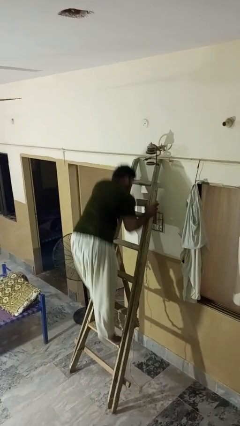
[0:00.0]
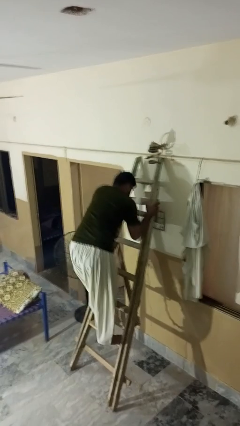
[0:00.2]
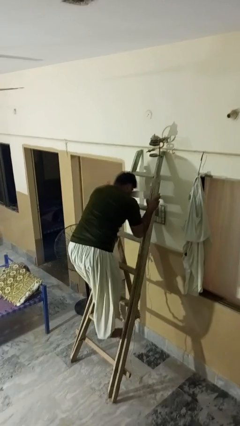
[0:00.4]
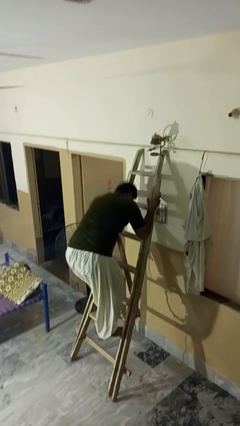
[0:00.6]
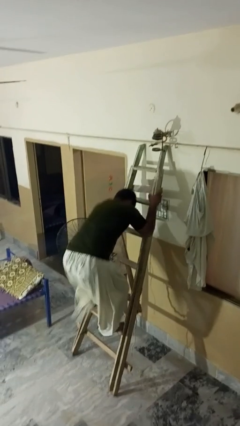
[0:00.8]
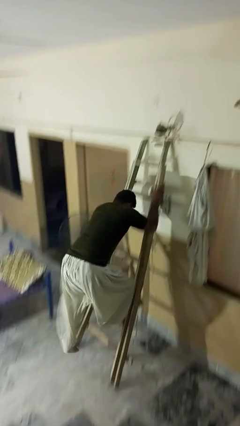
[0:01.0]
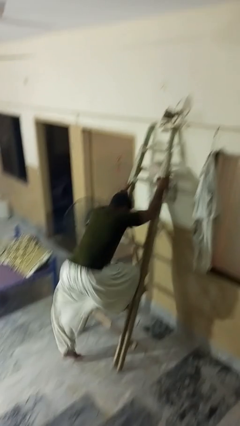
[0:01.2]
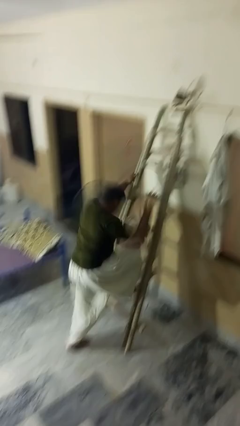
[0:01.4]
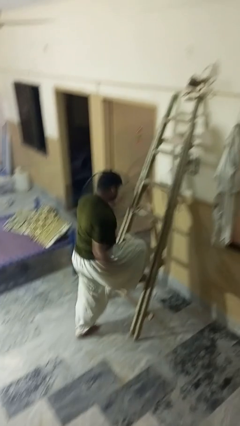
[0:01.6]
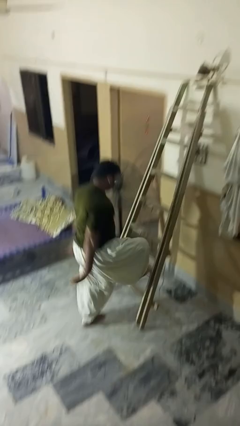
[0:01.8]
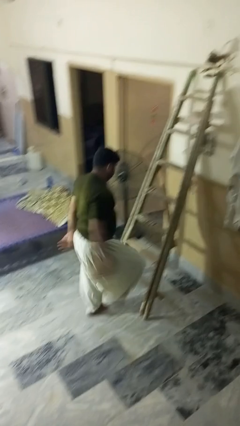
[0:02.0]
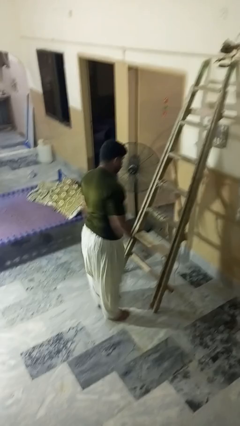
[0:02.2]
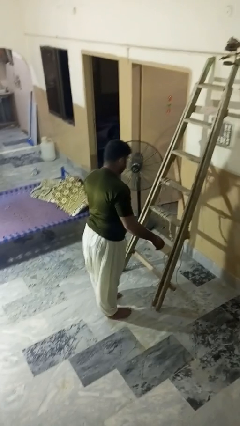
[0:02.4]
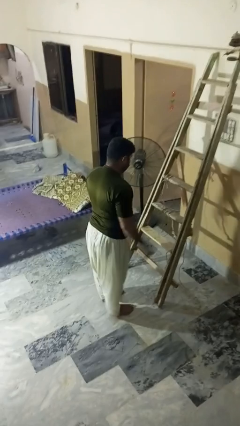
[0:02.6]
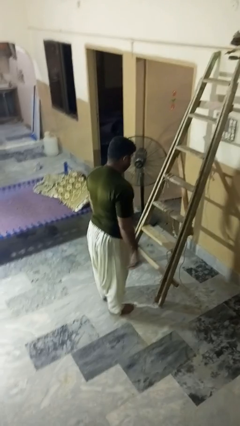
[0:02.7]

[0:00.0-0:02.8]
person climbs down ladder

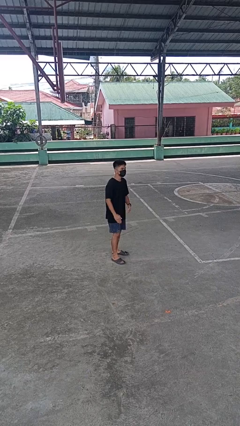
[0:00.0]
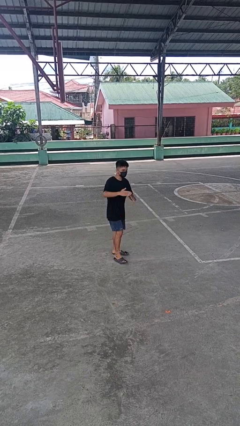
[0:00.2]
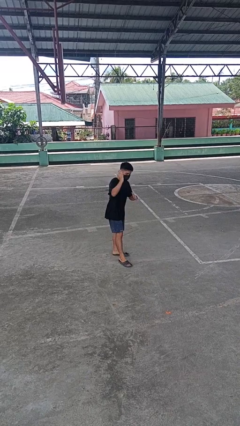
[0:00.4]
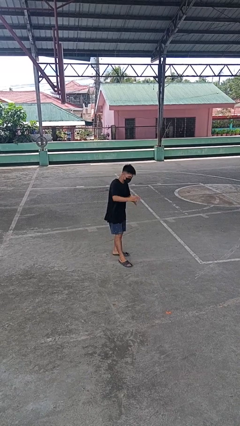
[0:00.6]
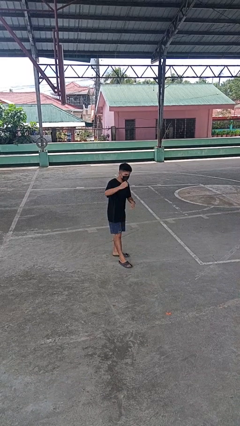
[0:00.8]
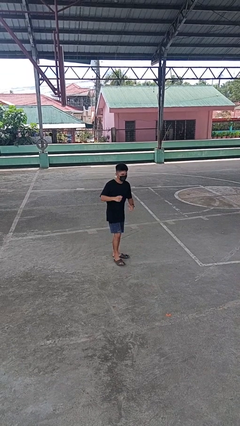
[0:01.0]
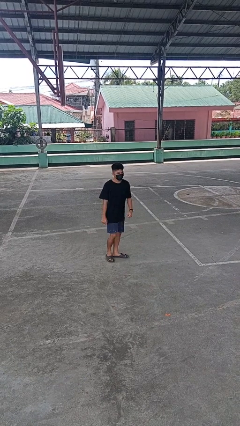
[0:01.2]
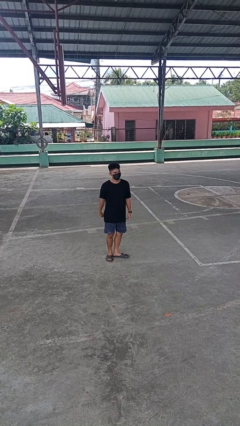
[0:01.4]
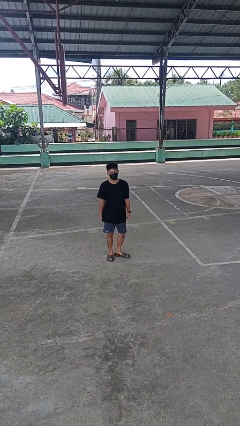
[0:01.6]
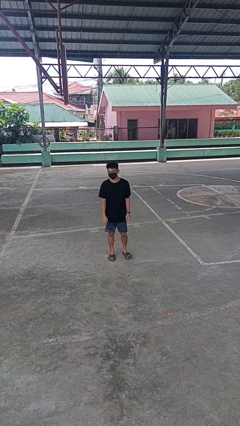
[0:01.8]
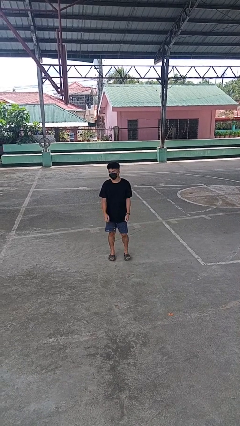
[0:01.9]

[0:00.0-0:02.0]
person karate chop

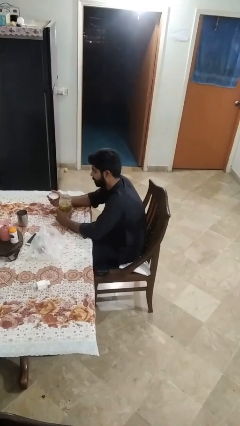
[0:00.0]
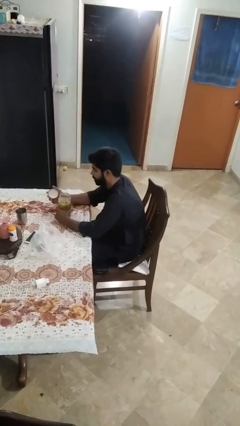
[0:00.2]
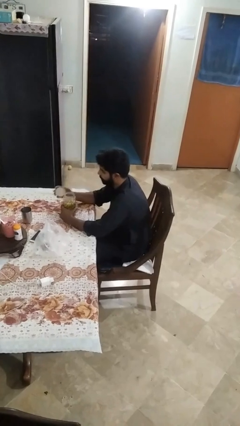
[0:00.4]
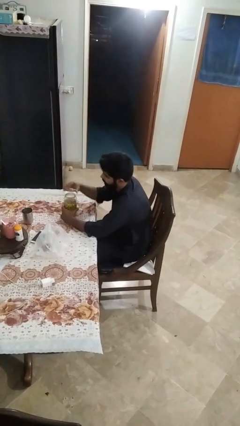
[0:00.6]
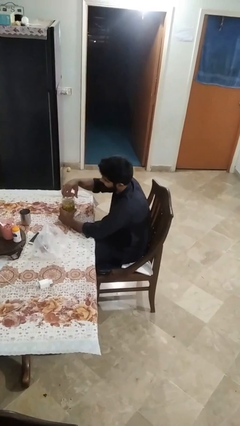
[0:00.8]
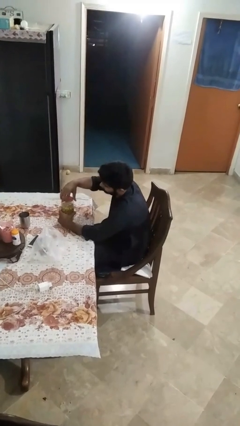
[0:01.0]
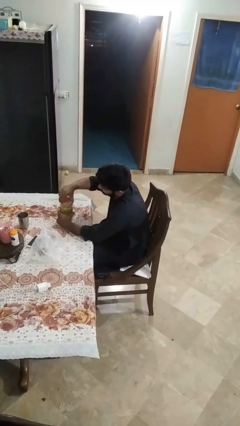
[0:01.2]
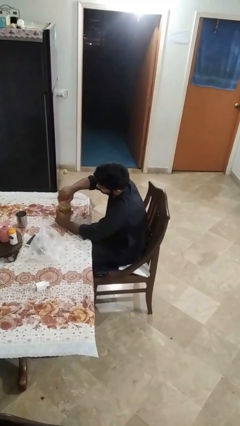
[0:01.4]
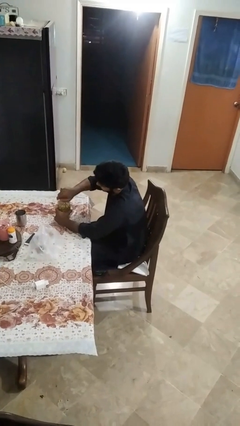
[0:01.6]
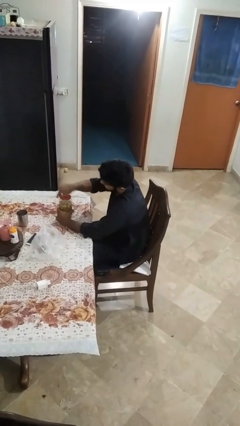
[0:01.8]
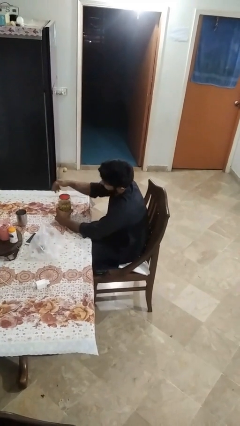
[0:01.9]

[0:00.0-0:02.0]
person closes jar

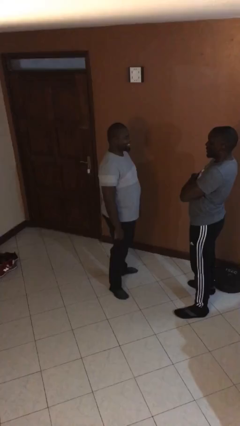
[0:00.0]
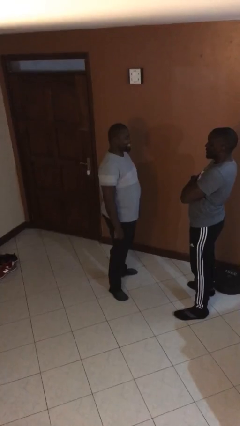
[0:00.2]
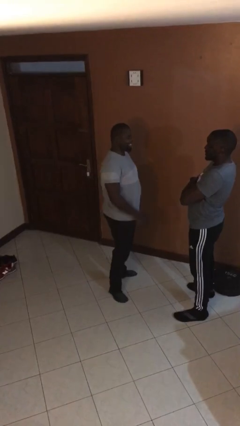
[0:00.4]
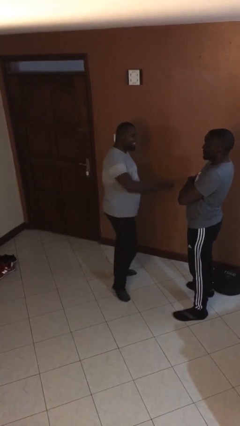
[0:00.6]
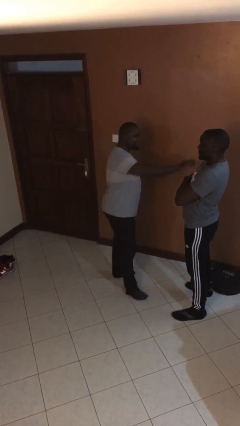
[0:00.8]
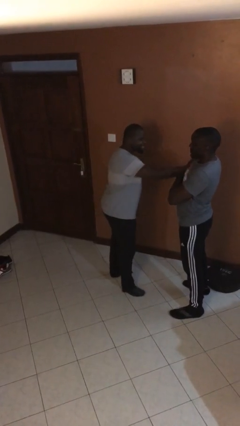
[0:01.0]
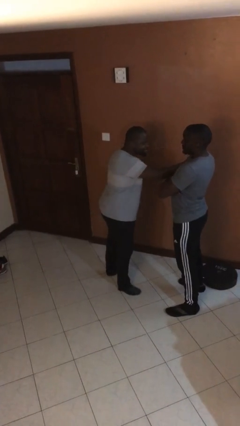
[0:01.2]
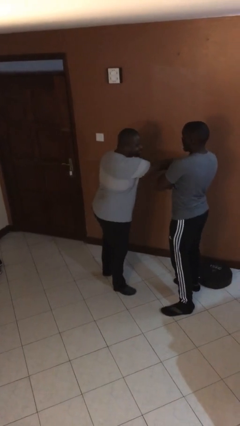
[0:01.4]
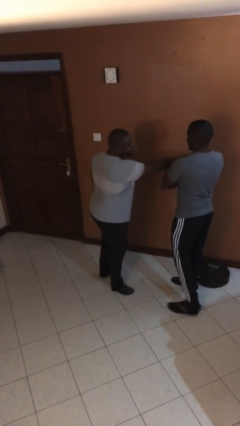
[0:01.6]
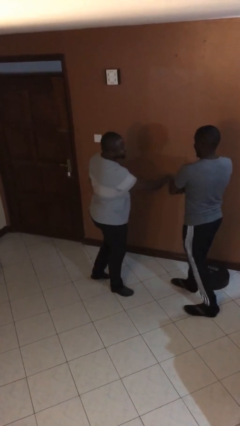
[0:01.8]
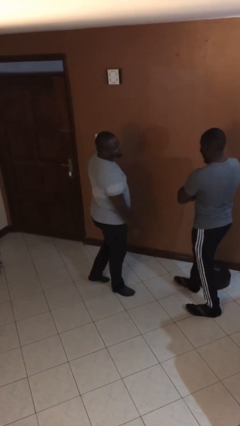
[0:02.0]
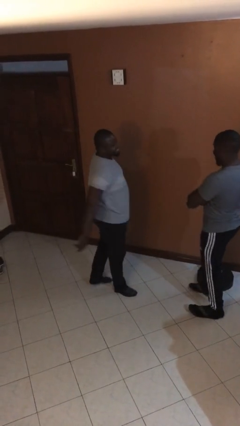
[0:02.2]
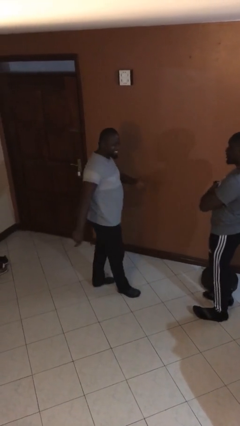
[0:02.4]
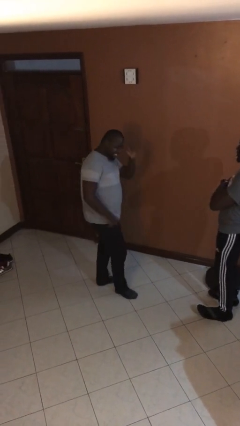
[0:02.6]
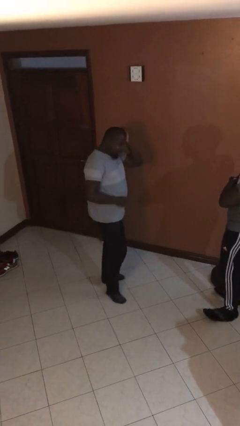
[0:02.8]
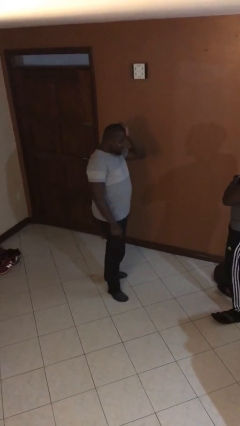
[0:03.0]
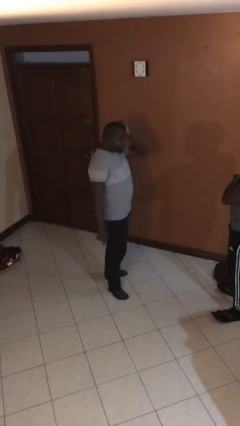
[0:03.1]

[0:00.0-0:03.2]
person shoves person

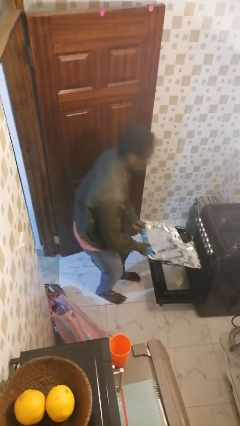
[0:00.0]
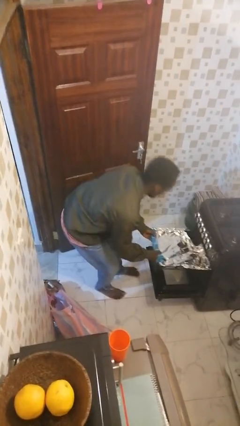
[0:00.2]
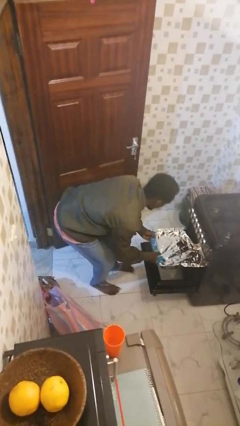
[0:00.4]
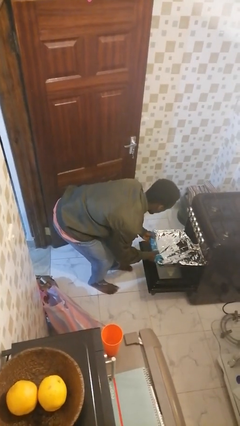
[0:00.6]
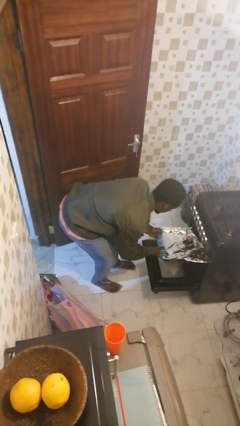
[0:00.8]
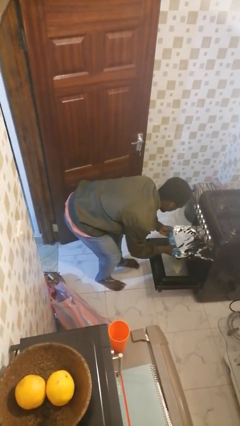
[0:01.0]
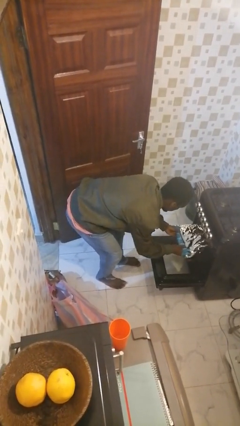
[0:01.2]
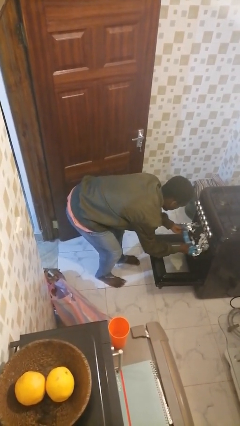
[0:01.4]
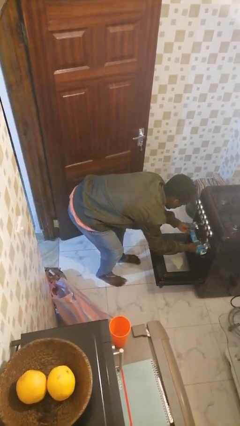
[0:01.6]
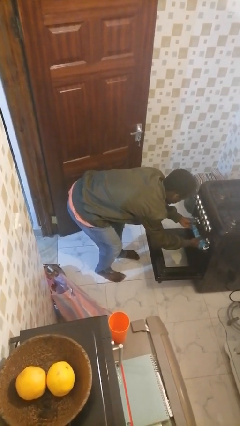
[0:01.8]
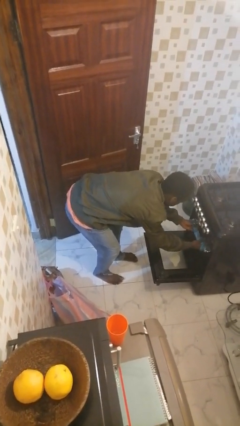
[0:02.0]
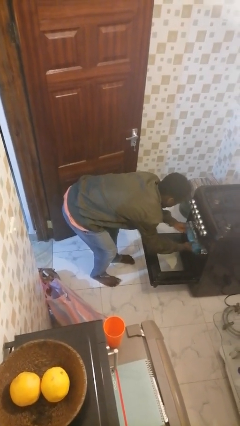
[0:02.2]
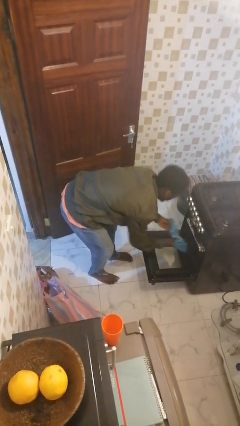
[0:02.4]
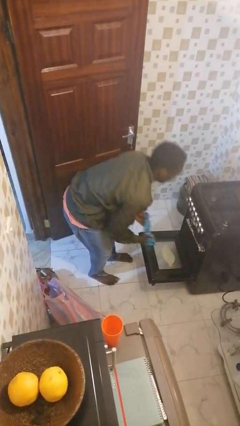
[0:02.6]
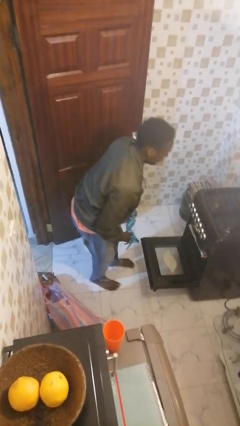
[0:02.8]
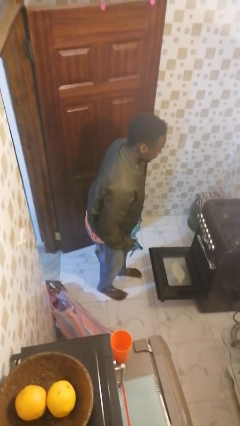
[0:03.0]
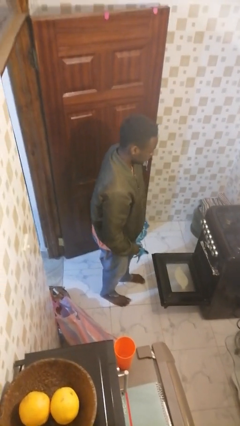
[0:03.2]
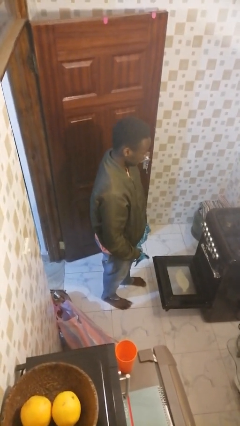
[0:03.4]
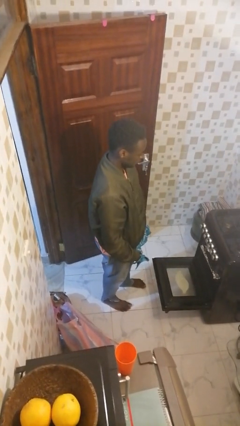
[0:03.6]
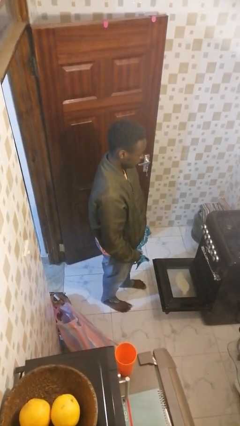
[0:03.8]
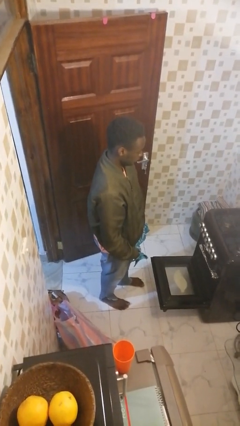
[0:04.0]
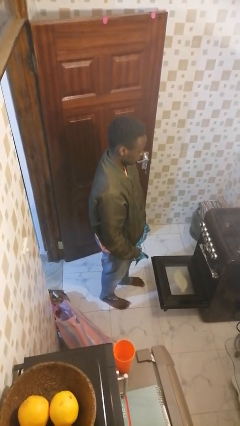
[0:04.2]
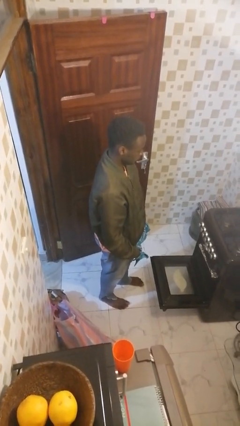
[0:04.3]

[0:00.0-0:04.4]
person puts object into oven

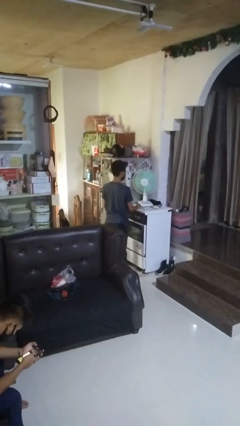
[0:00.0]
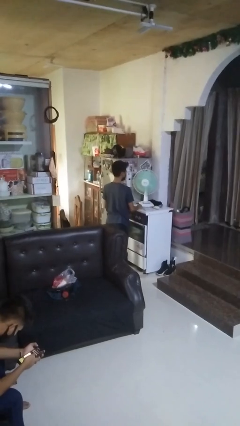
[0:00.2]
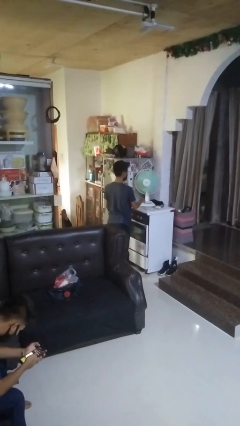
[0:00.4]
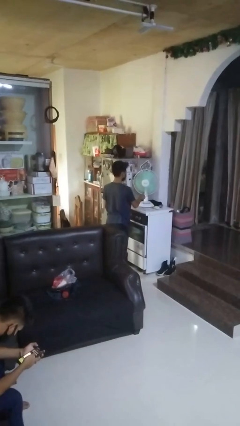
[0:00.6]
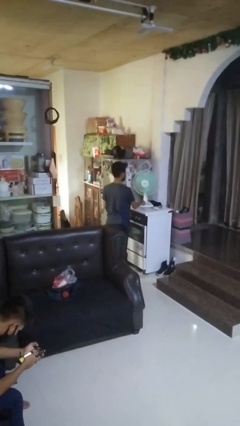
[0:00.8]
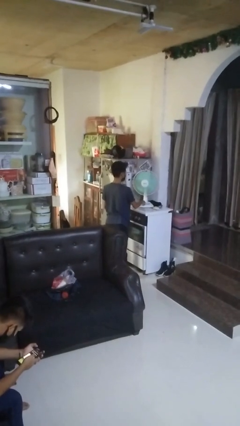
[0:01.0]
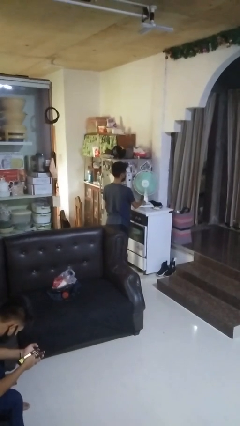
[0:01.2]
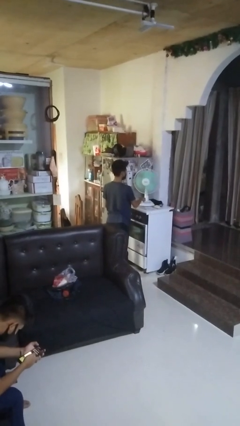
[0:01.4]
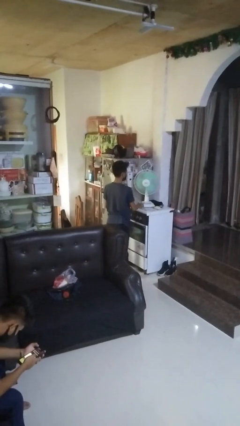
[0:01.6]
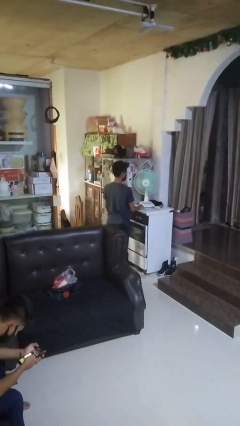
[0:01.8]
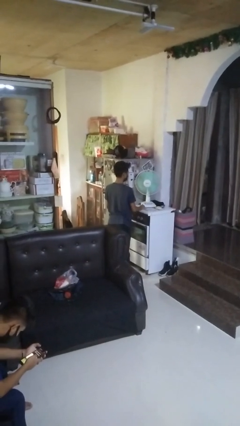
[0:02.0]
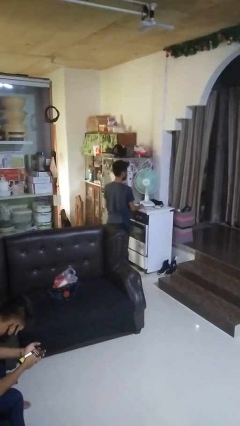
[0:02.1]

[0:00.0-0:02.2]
person turns off fan

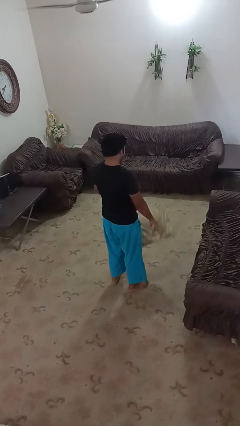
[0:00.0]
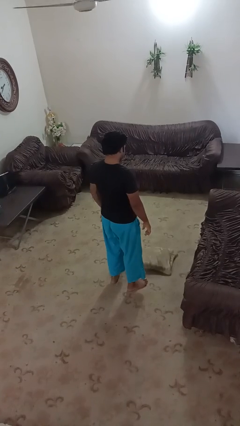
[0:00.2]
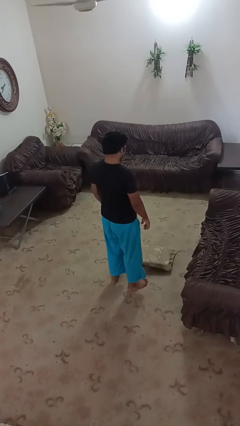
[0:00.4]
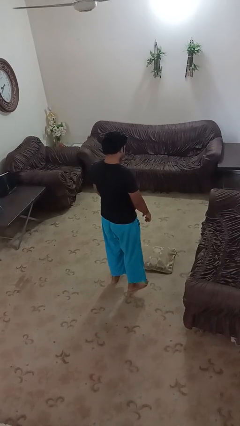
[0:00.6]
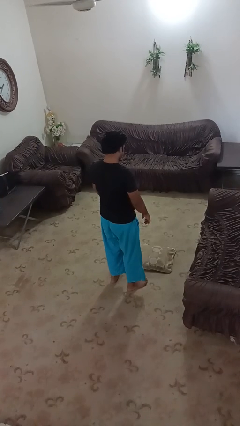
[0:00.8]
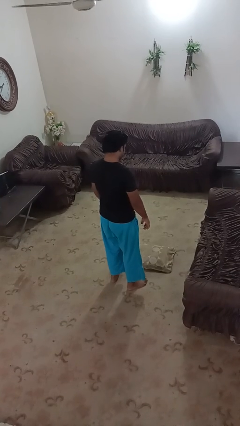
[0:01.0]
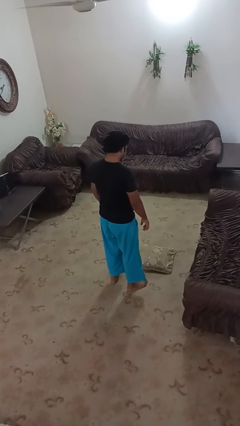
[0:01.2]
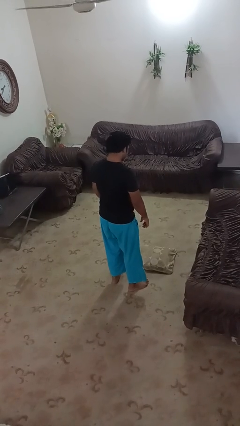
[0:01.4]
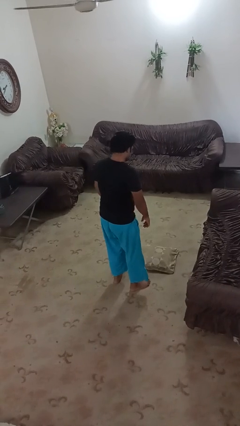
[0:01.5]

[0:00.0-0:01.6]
person drops object
